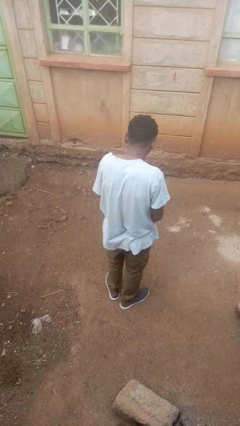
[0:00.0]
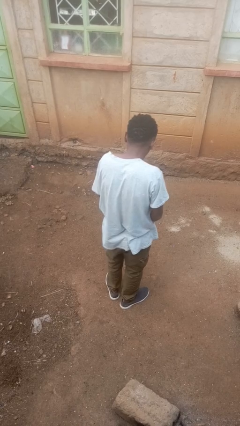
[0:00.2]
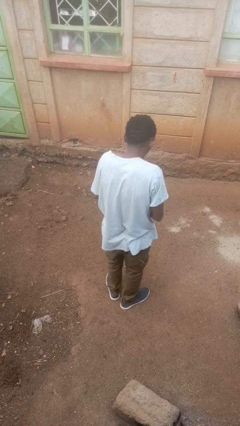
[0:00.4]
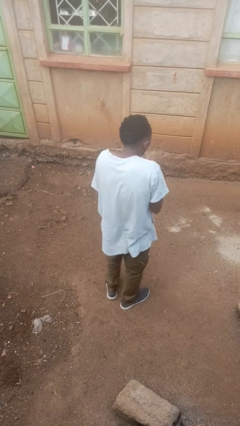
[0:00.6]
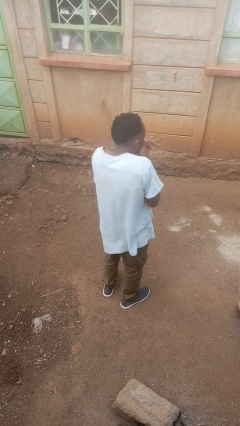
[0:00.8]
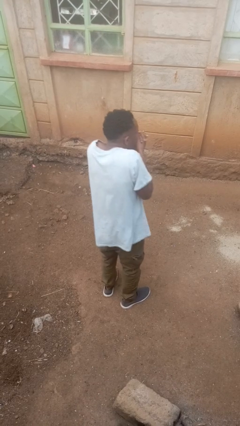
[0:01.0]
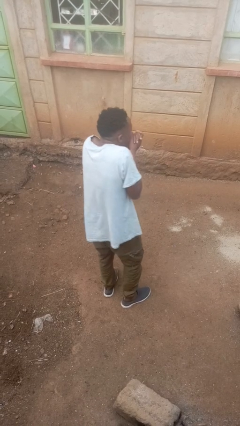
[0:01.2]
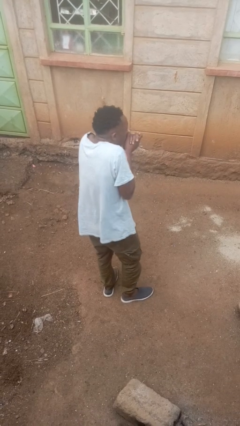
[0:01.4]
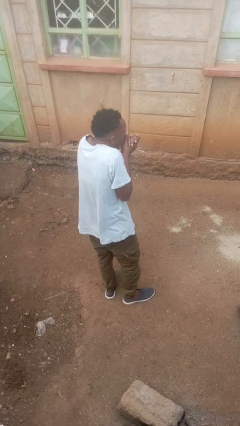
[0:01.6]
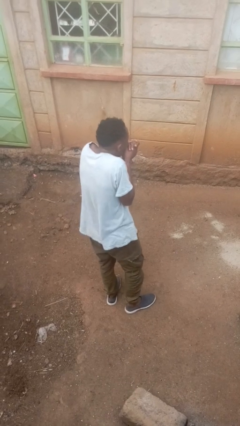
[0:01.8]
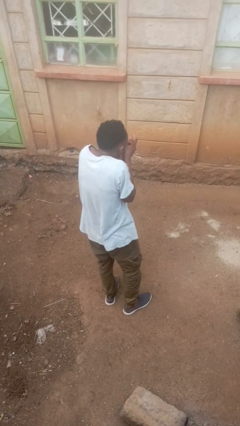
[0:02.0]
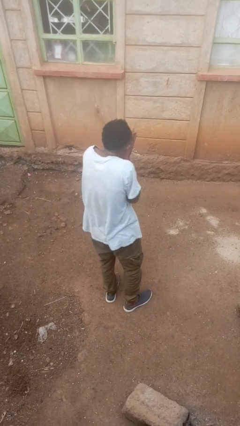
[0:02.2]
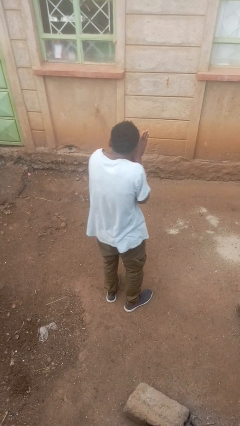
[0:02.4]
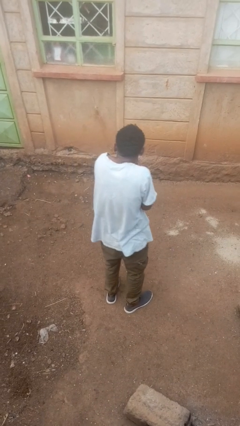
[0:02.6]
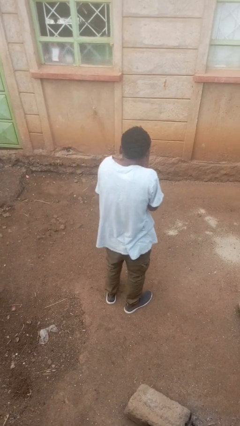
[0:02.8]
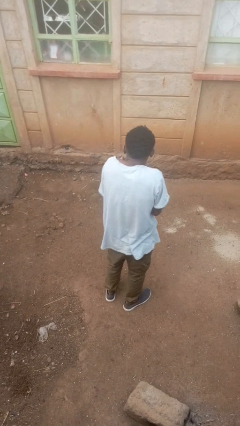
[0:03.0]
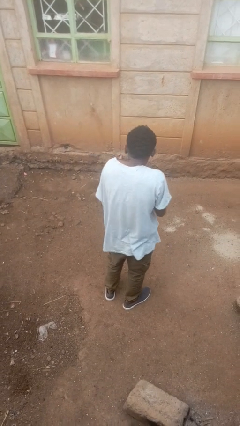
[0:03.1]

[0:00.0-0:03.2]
person blows into hands

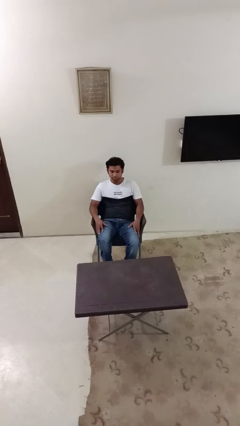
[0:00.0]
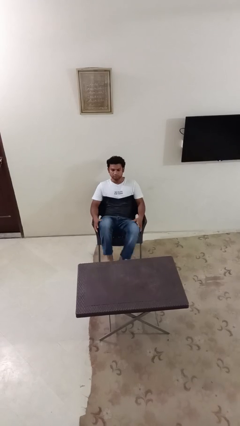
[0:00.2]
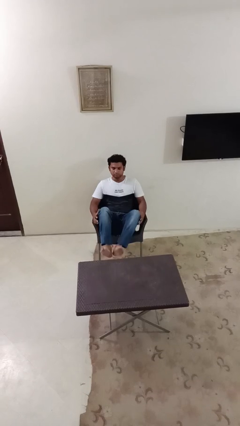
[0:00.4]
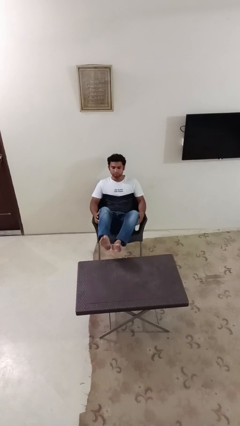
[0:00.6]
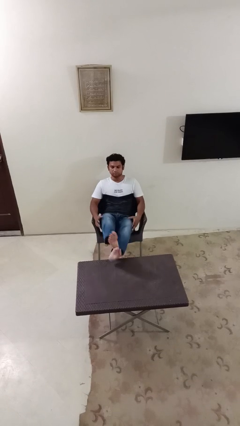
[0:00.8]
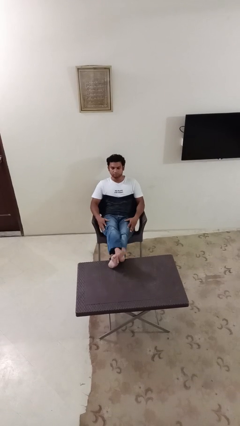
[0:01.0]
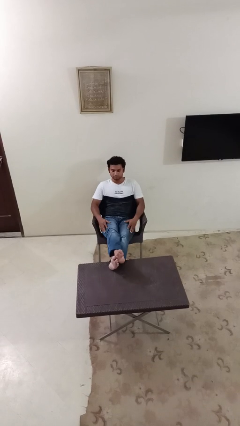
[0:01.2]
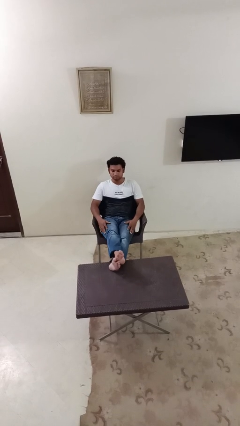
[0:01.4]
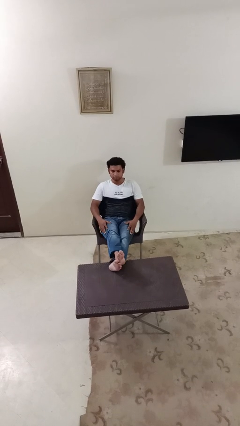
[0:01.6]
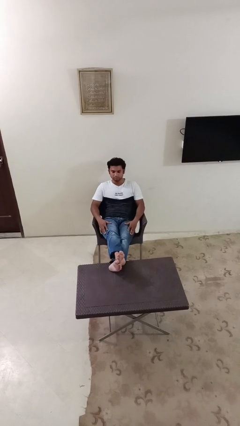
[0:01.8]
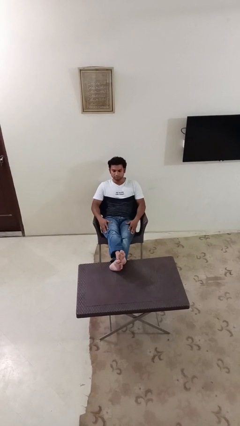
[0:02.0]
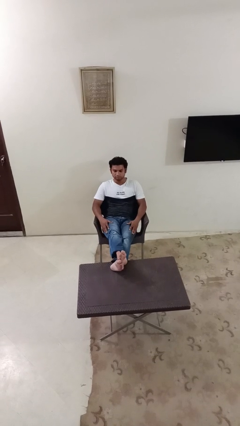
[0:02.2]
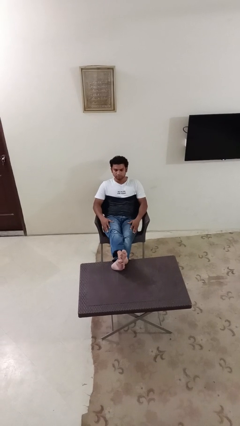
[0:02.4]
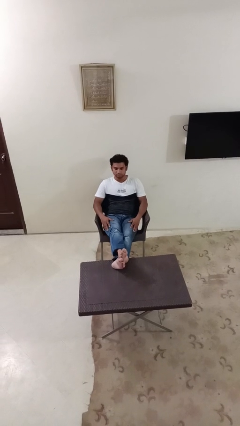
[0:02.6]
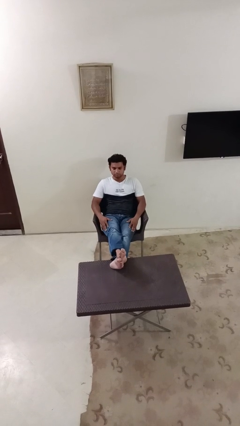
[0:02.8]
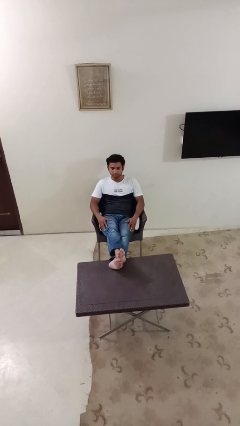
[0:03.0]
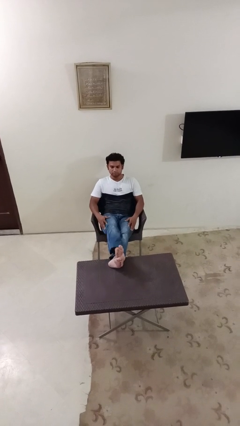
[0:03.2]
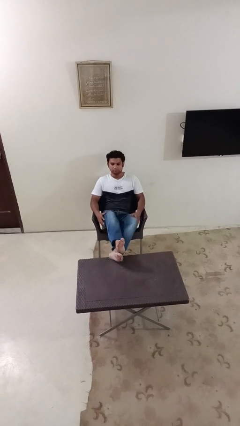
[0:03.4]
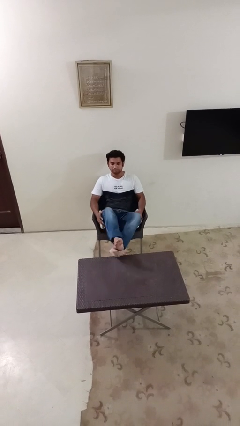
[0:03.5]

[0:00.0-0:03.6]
person puts feet up

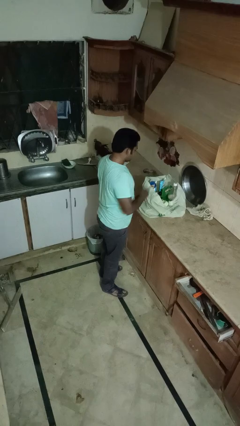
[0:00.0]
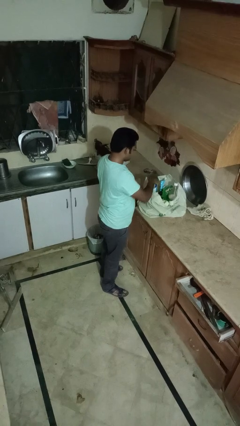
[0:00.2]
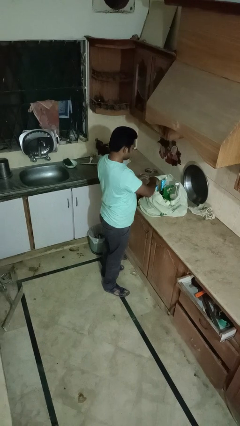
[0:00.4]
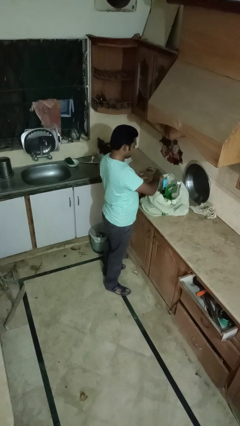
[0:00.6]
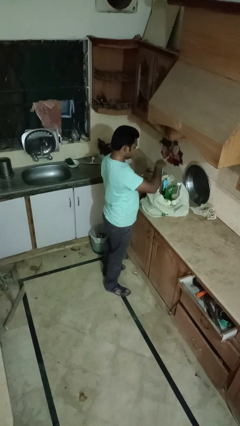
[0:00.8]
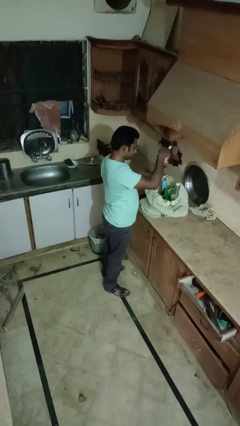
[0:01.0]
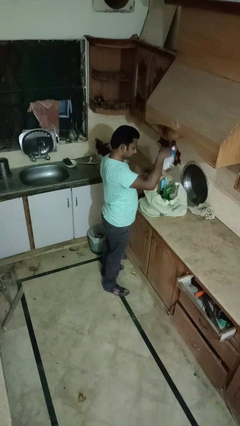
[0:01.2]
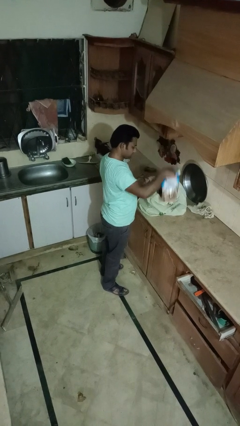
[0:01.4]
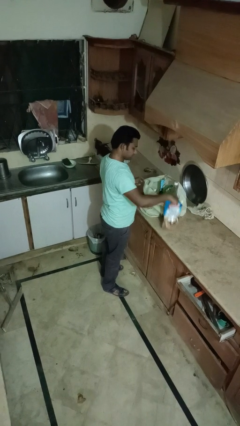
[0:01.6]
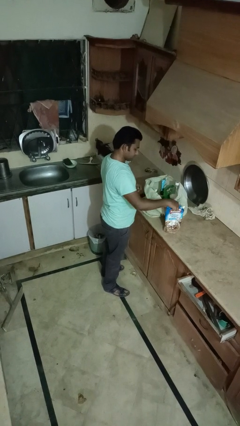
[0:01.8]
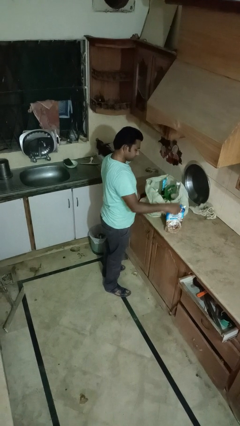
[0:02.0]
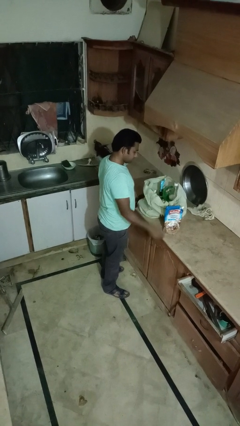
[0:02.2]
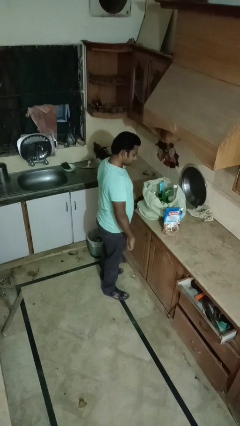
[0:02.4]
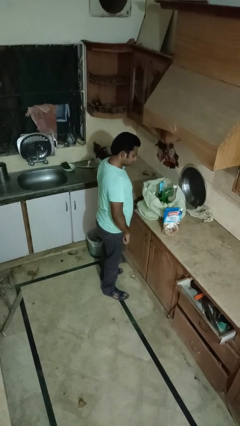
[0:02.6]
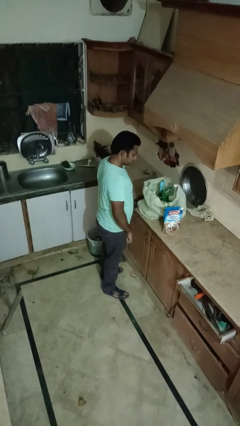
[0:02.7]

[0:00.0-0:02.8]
person takes object from bag

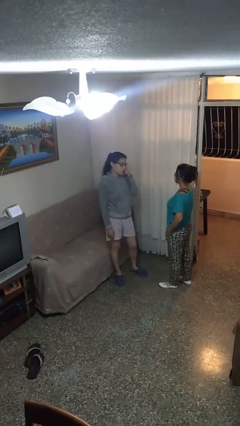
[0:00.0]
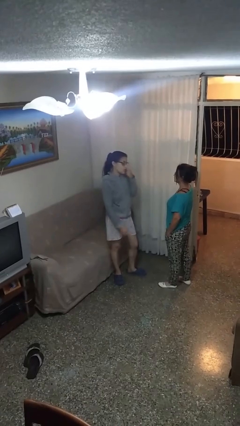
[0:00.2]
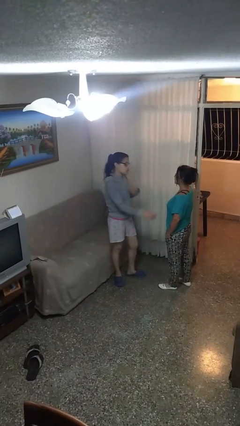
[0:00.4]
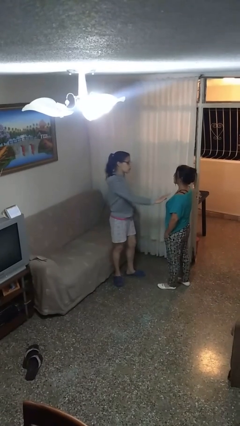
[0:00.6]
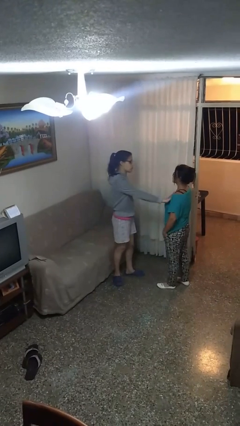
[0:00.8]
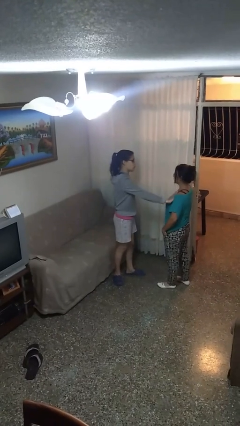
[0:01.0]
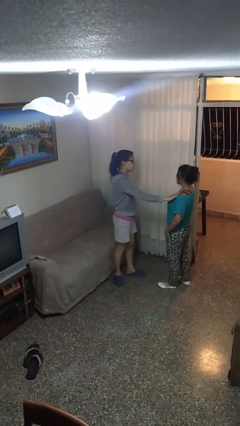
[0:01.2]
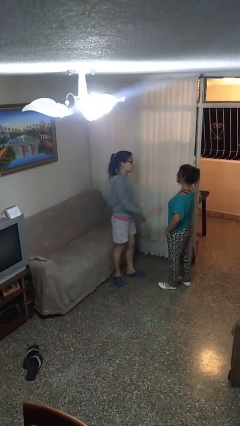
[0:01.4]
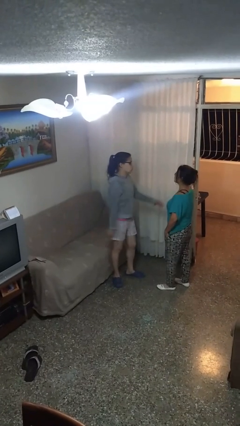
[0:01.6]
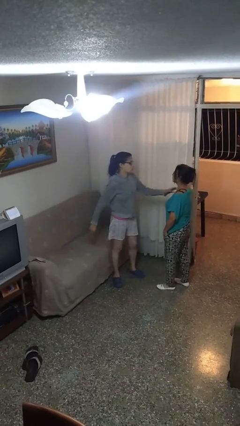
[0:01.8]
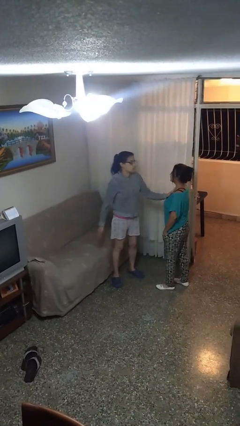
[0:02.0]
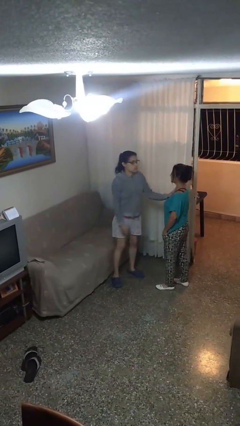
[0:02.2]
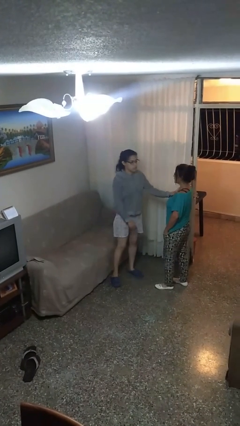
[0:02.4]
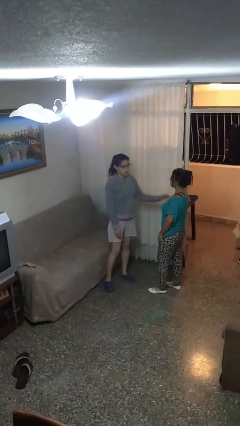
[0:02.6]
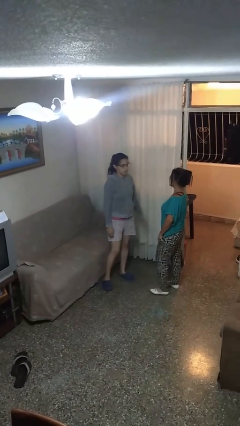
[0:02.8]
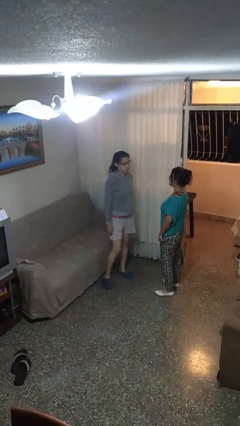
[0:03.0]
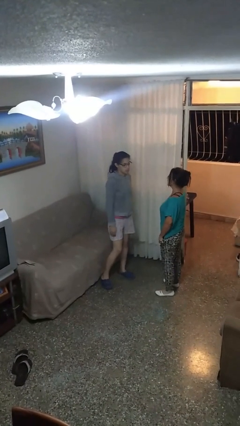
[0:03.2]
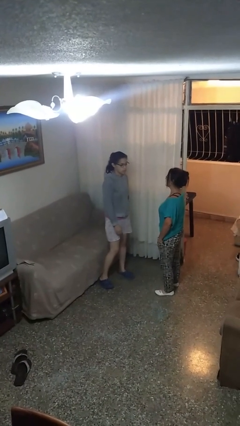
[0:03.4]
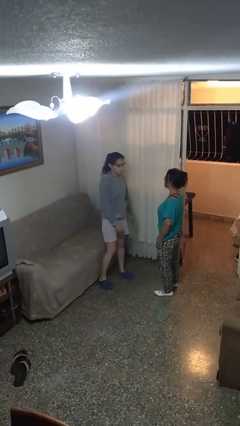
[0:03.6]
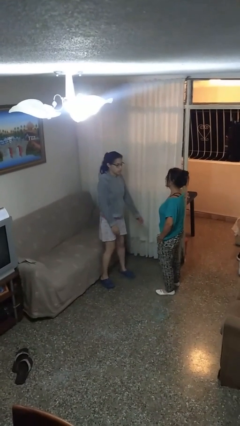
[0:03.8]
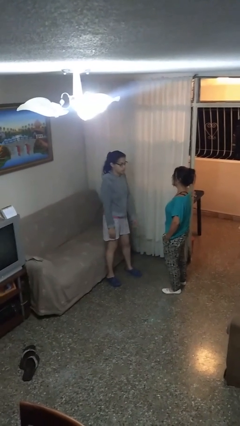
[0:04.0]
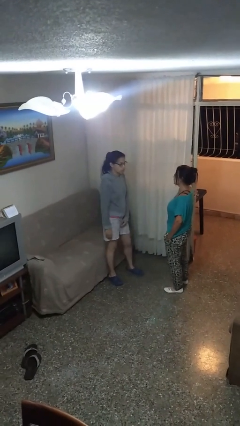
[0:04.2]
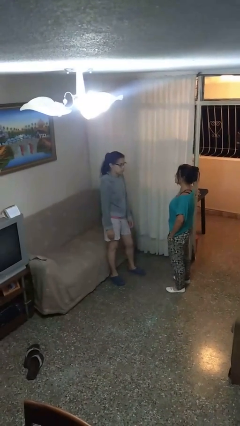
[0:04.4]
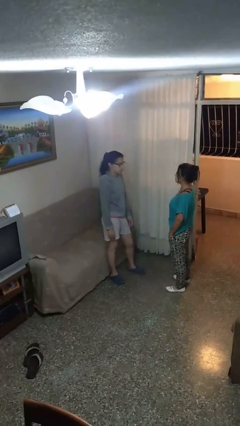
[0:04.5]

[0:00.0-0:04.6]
person shoves person

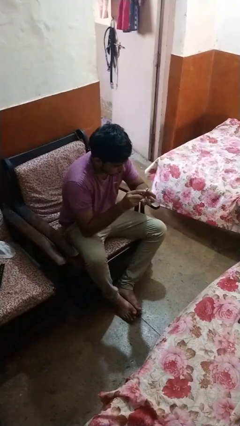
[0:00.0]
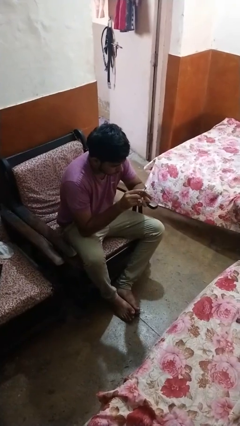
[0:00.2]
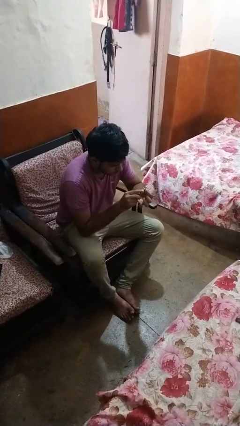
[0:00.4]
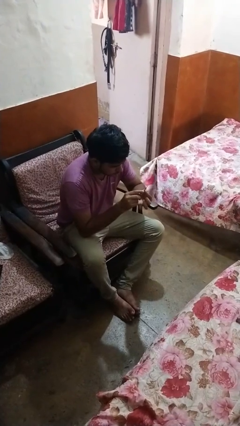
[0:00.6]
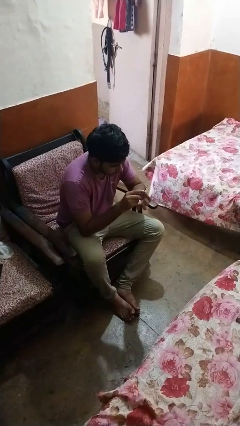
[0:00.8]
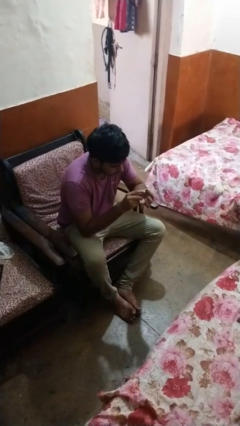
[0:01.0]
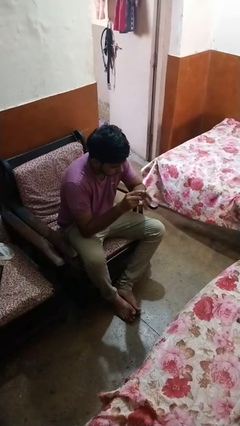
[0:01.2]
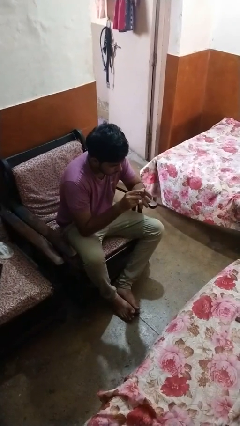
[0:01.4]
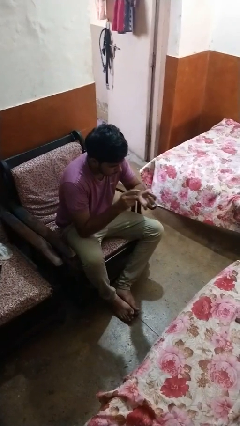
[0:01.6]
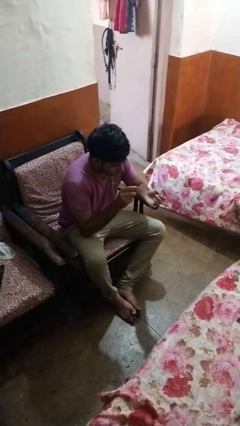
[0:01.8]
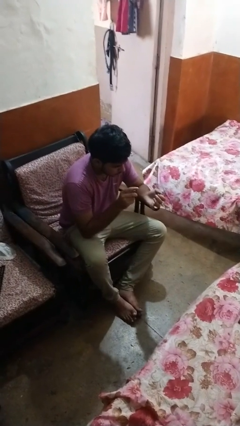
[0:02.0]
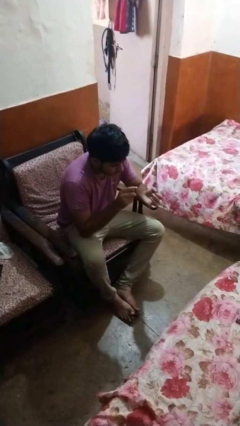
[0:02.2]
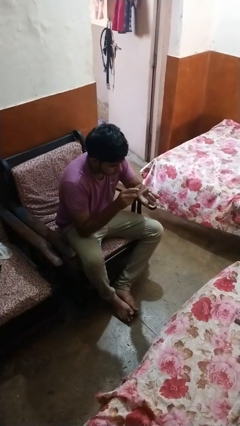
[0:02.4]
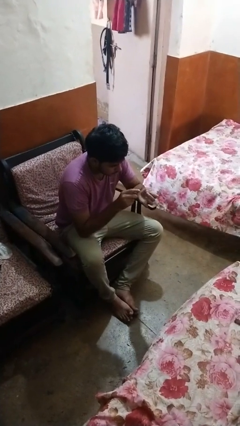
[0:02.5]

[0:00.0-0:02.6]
person files fingernails

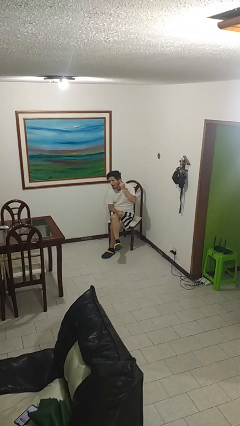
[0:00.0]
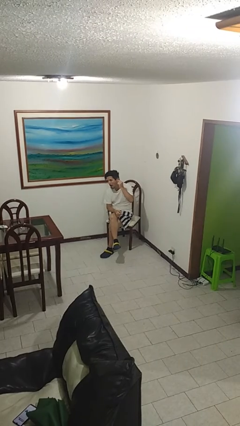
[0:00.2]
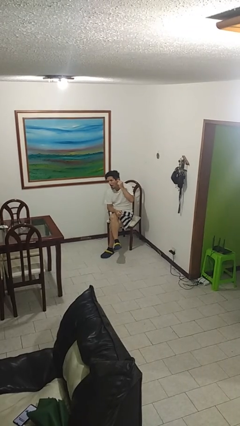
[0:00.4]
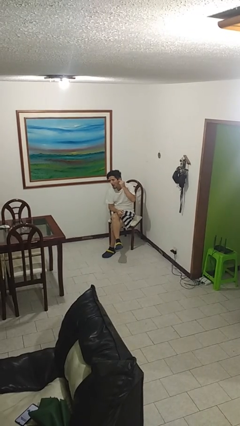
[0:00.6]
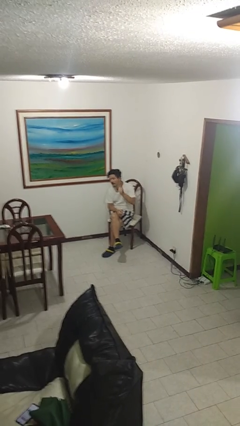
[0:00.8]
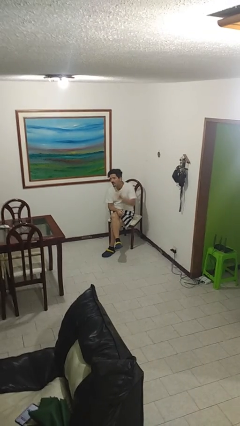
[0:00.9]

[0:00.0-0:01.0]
person gestures listen closely
